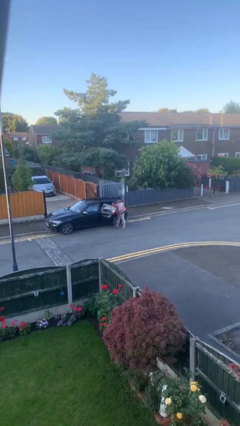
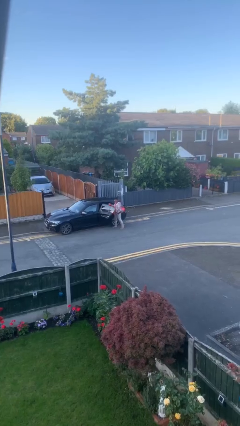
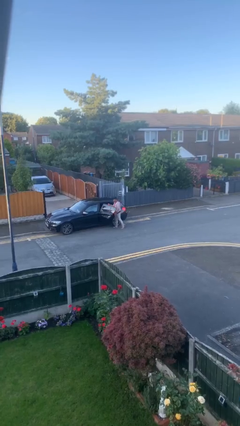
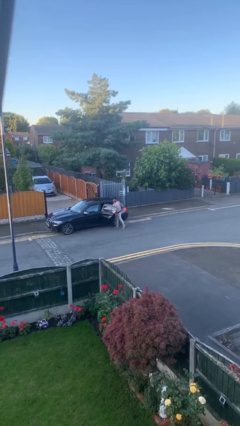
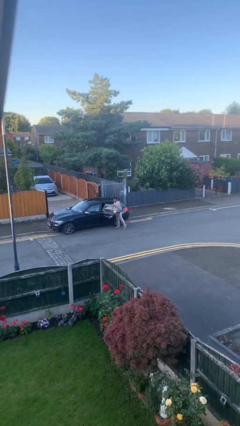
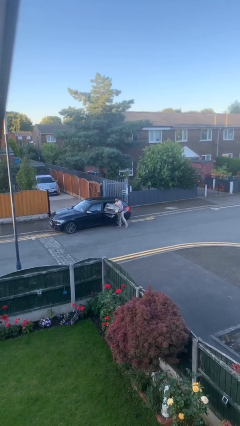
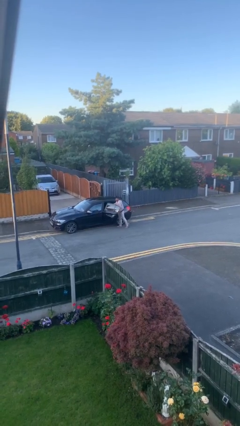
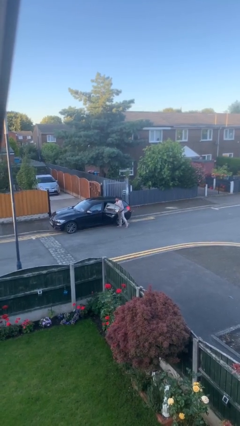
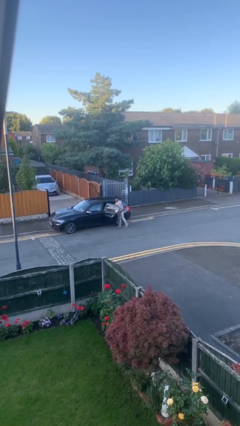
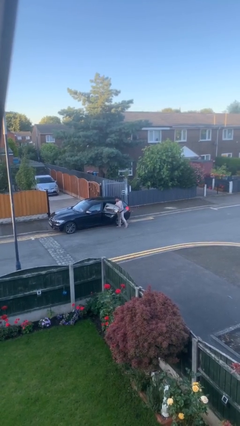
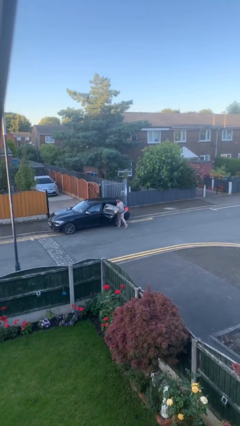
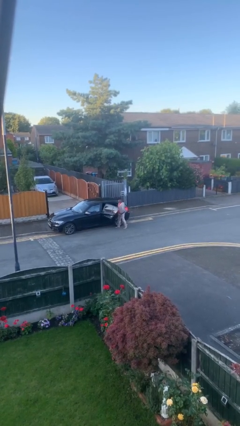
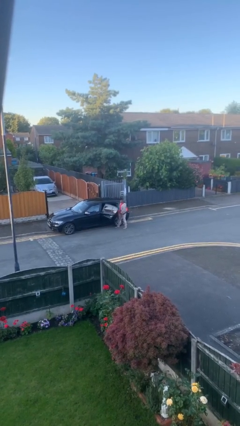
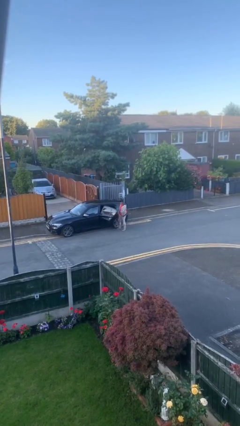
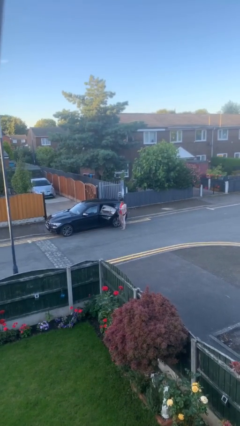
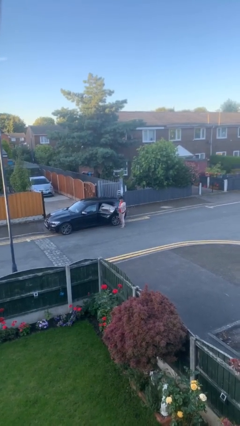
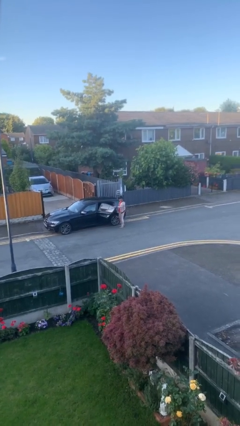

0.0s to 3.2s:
person loads car

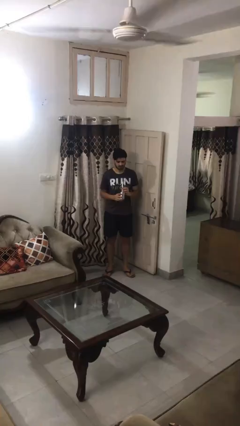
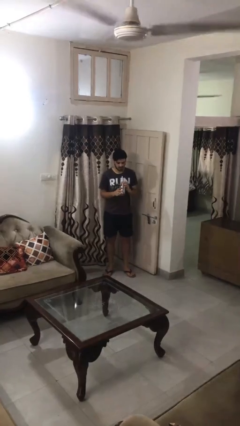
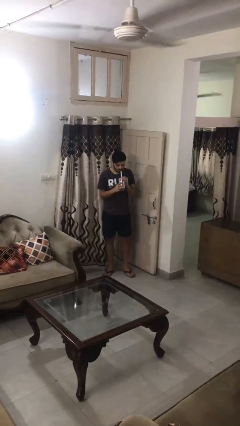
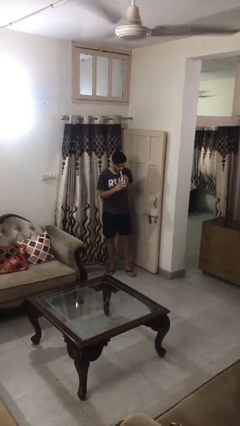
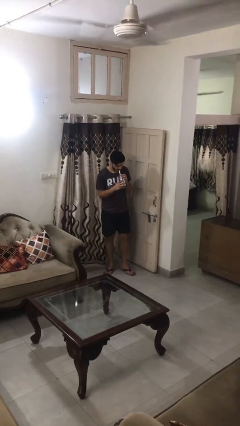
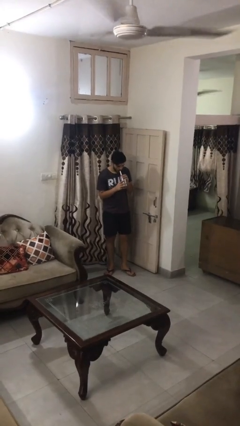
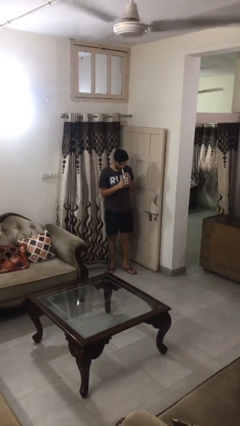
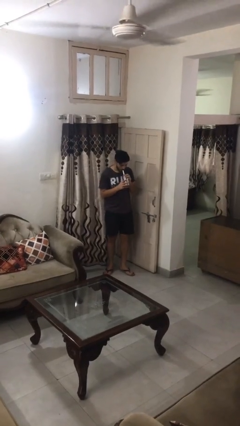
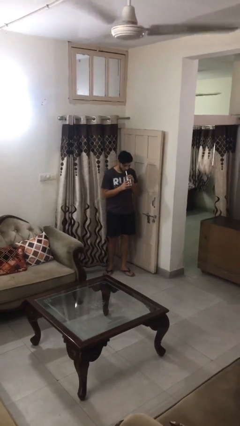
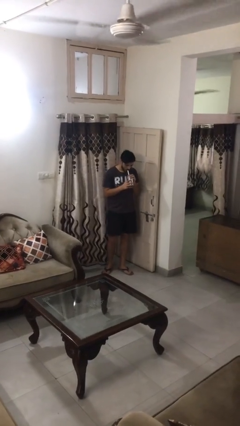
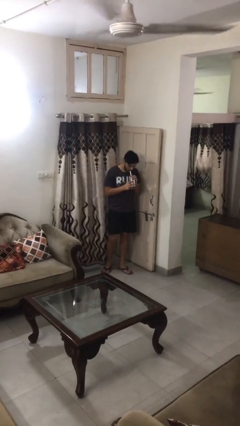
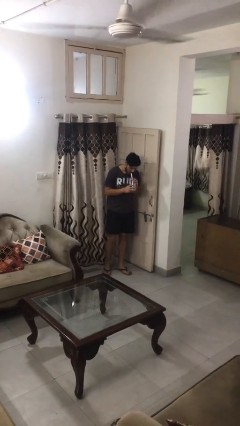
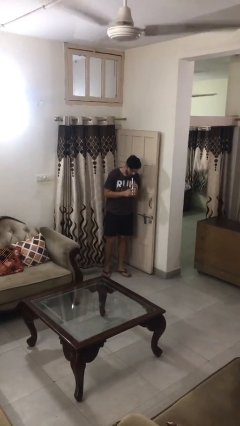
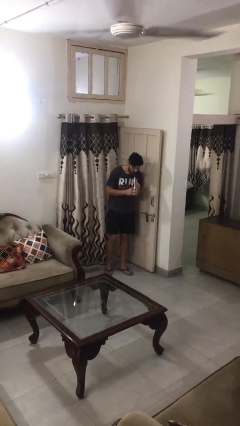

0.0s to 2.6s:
person drinks from straw

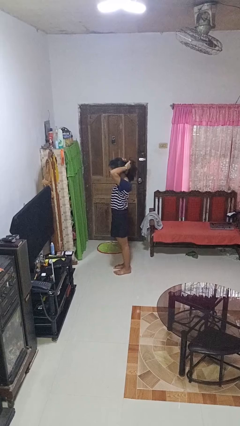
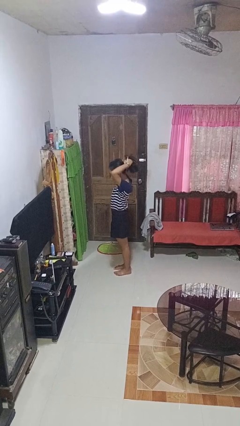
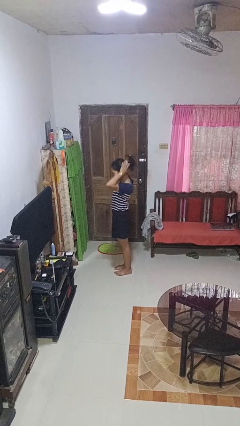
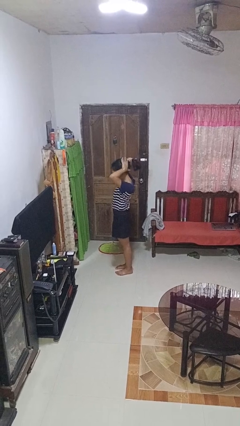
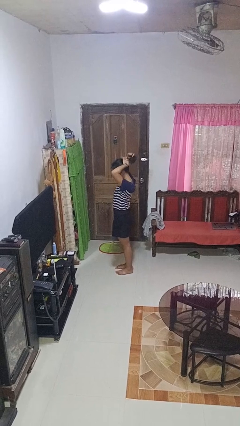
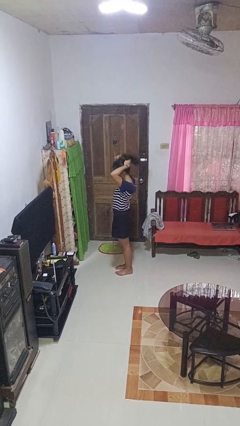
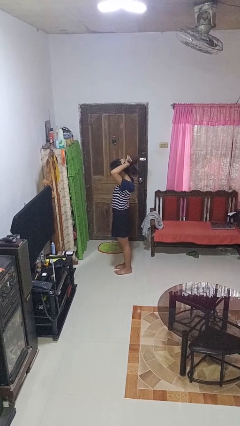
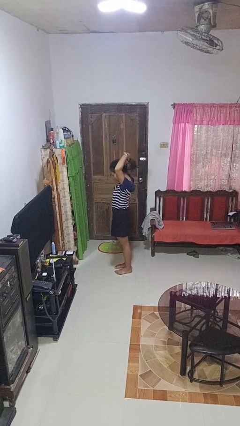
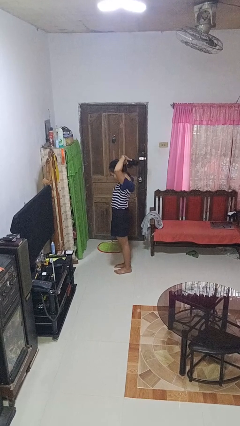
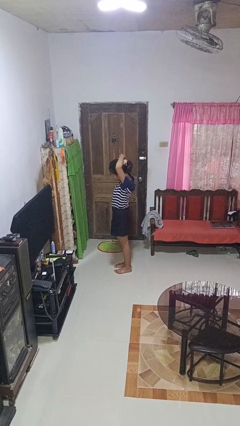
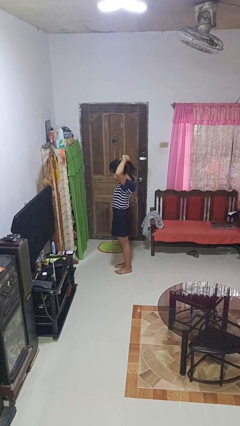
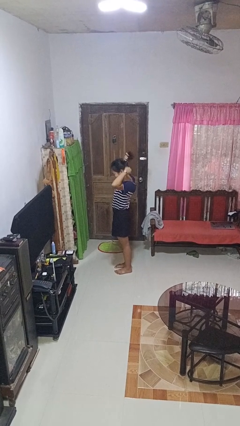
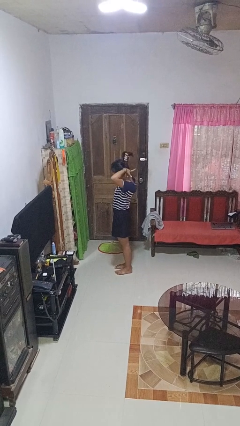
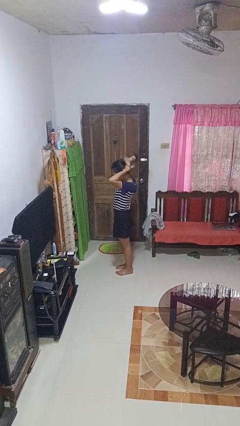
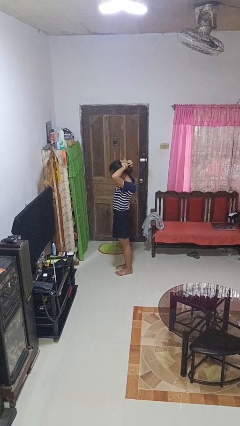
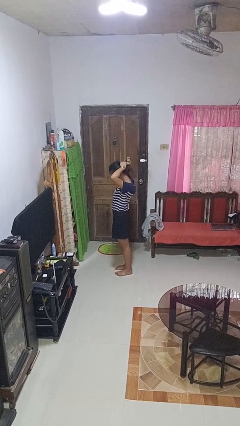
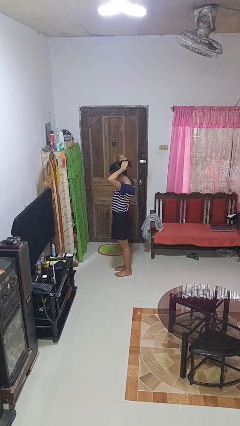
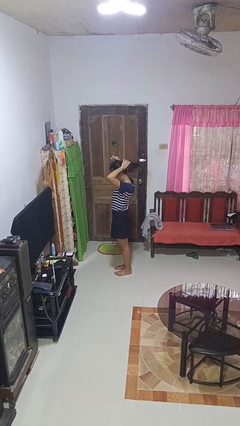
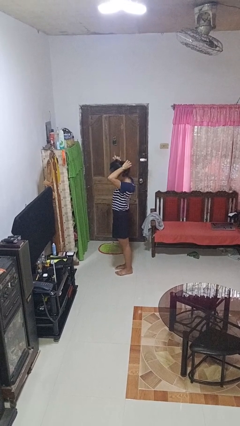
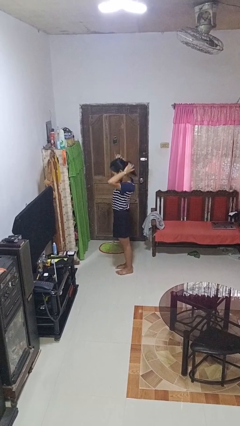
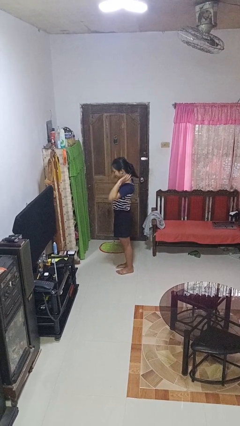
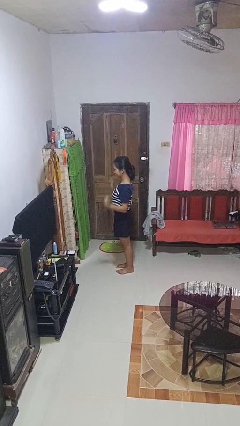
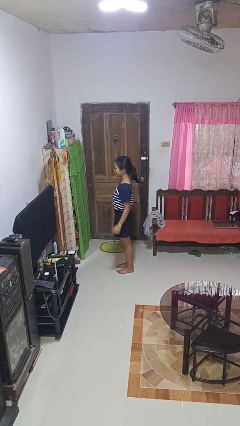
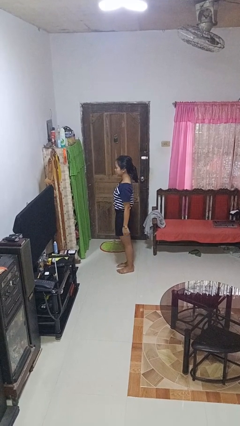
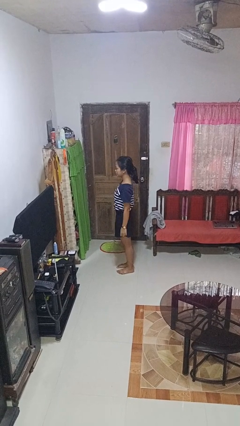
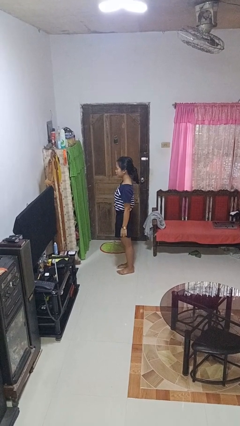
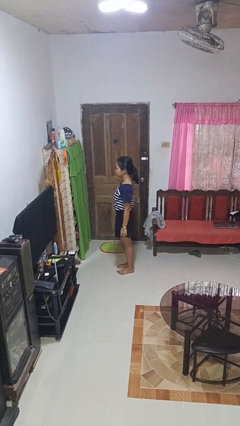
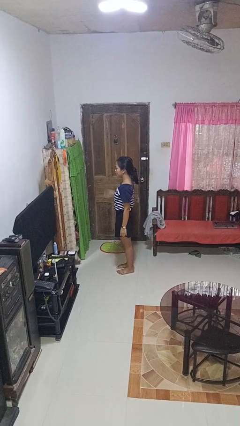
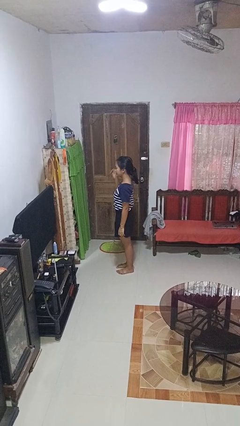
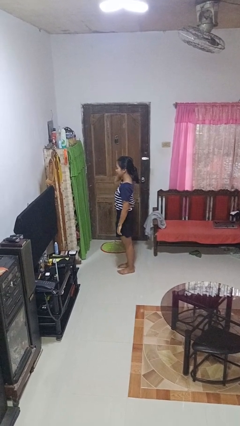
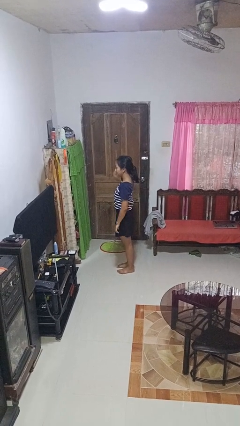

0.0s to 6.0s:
person puts hair in ponytail

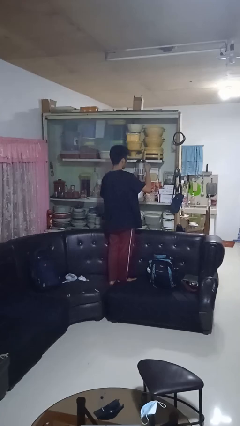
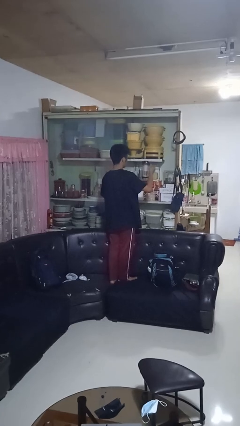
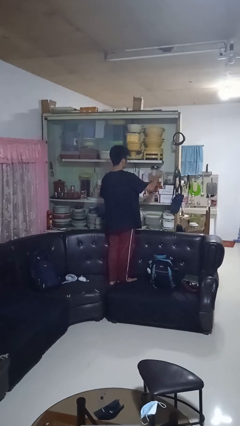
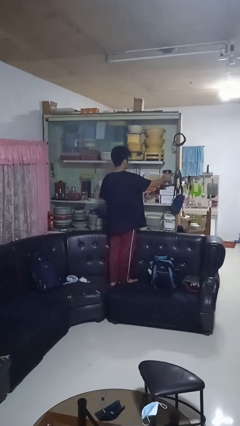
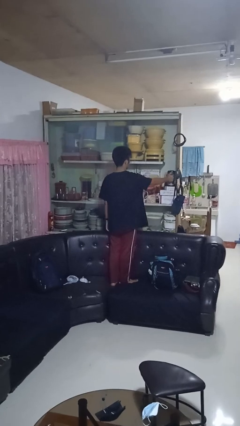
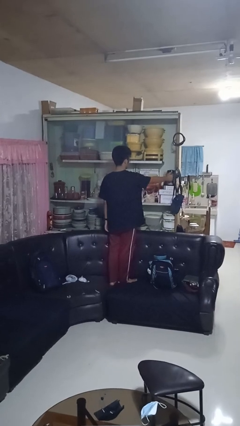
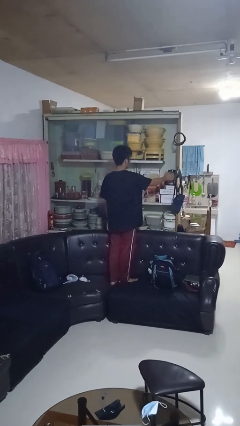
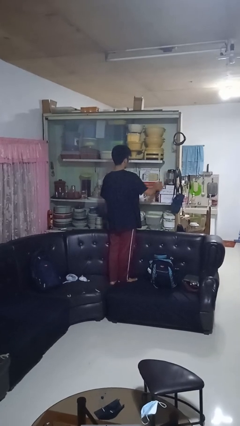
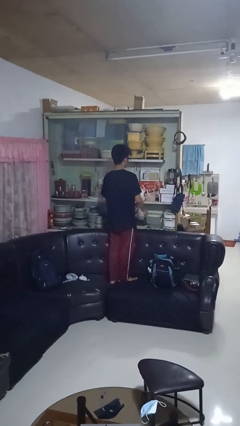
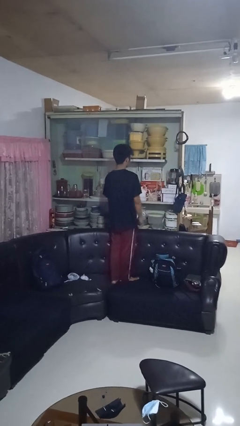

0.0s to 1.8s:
person puts down object into cabinet

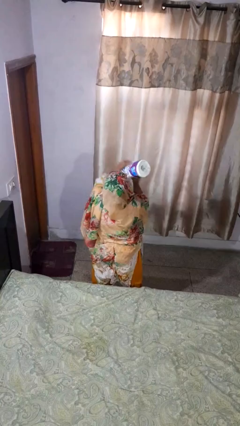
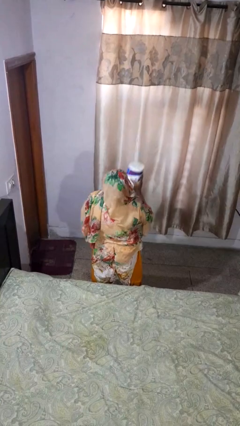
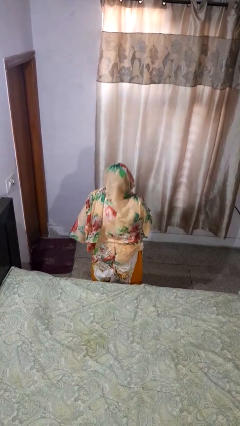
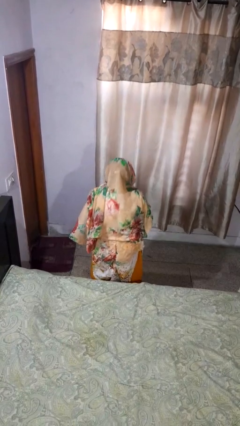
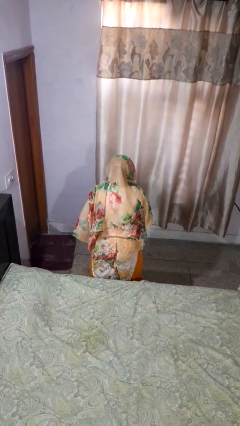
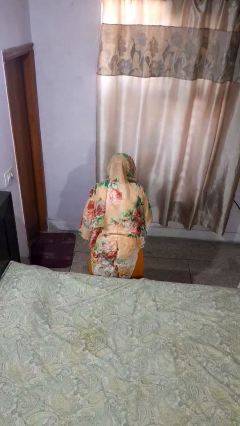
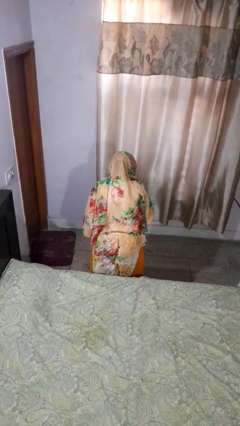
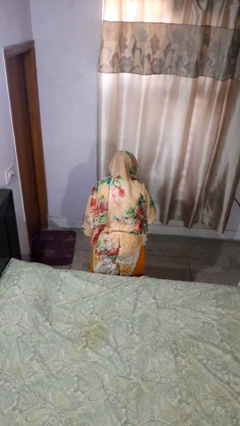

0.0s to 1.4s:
person catches dropped object

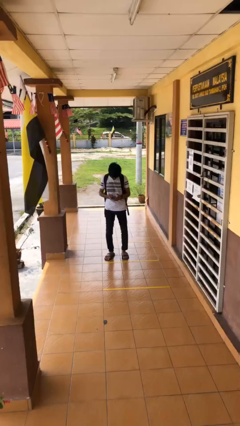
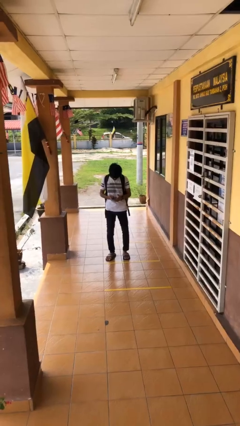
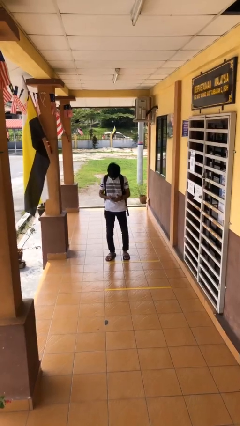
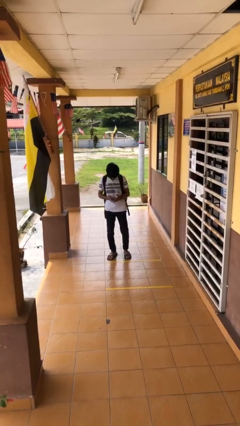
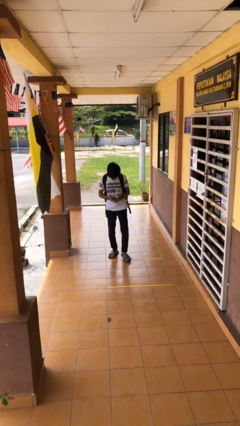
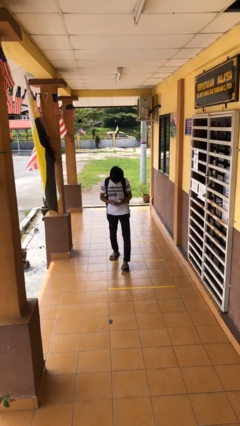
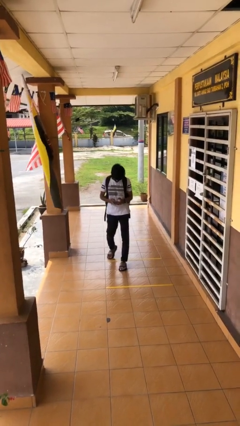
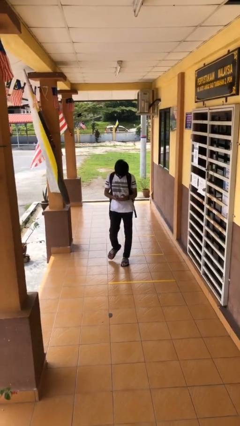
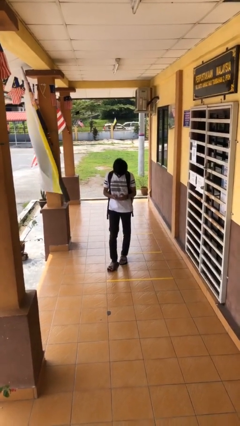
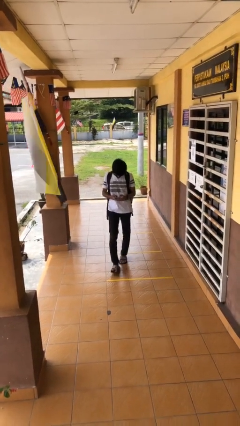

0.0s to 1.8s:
person texts on phone

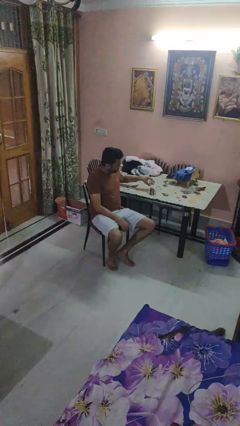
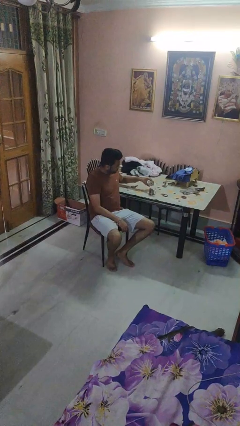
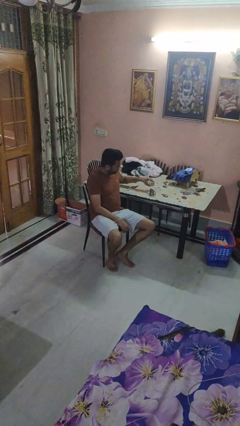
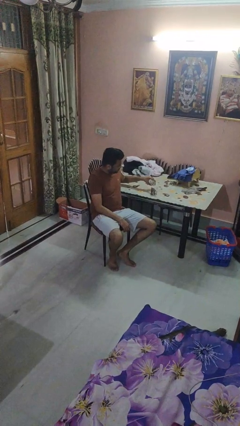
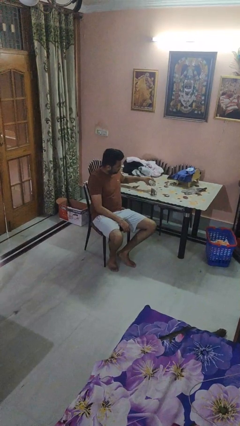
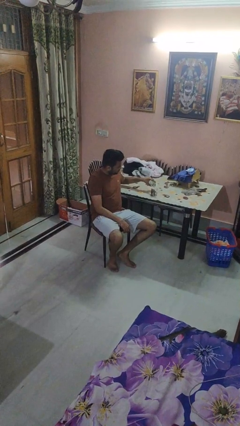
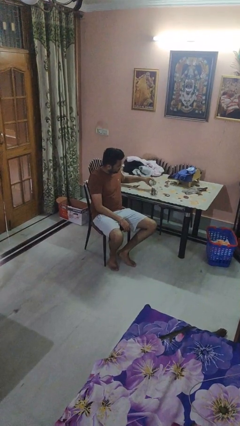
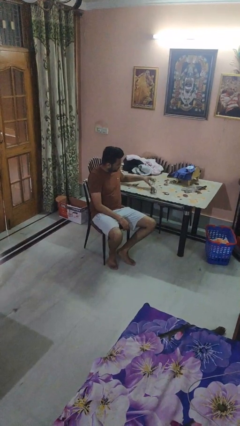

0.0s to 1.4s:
person pours liquid into cup
